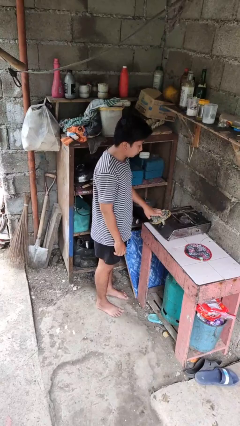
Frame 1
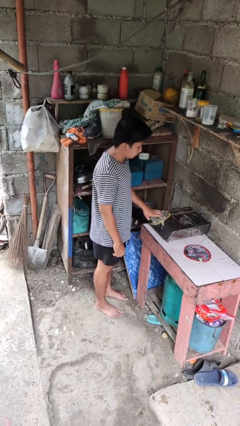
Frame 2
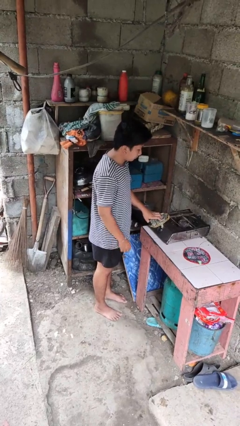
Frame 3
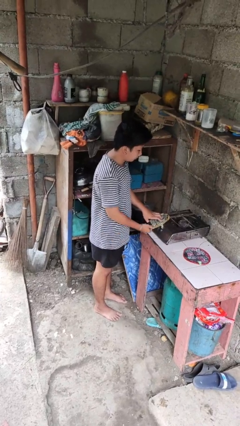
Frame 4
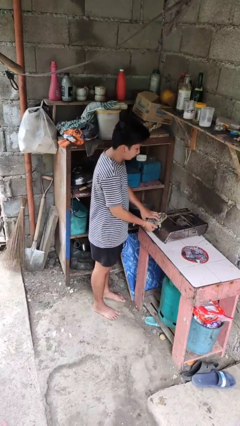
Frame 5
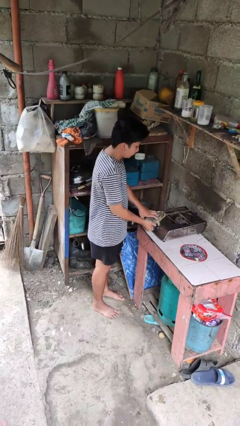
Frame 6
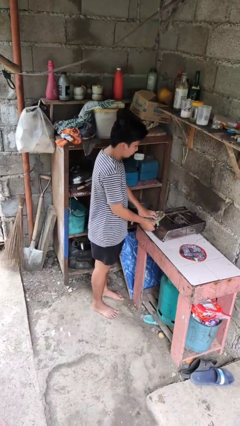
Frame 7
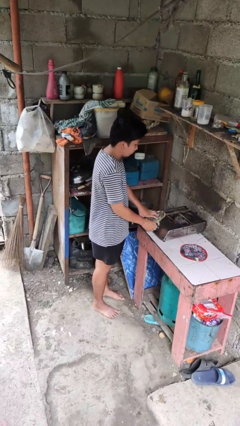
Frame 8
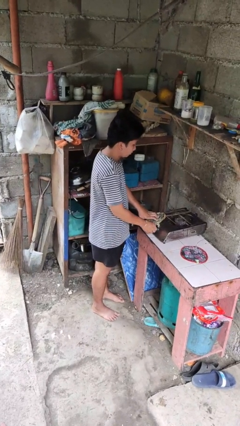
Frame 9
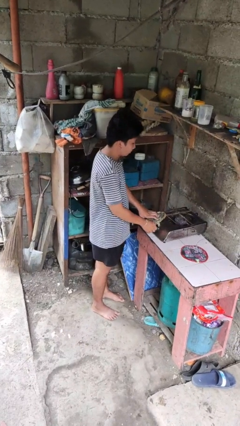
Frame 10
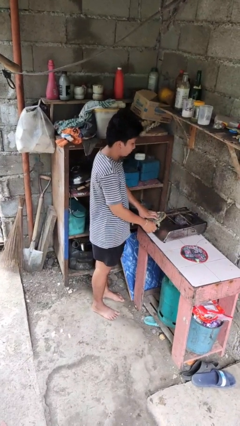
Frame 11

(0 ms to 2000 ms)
person turns on stovetop

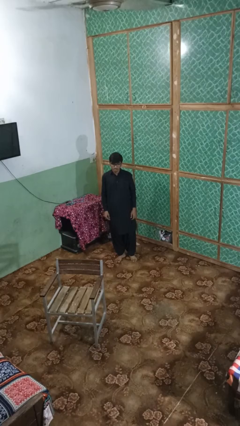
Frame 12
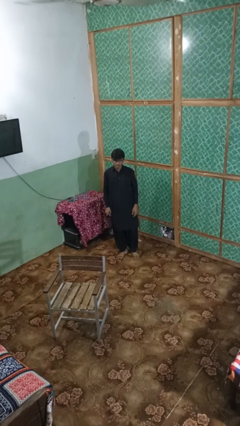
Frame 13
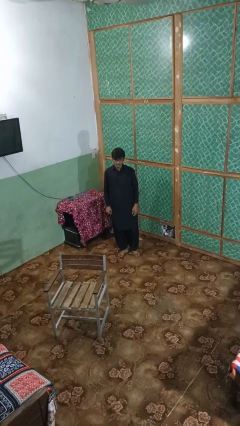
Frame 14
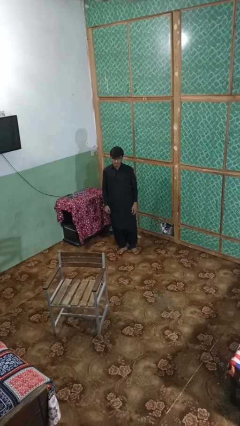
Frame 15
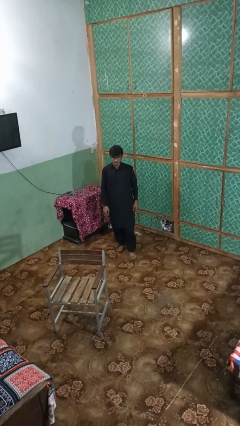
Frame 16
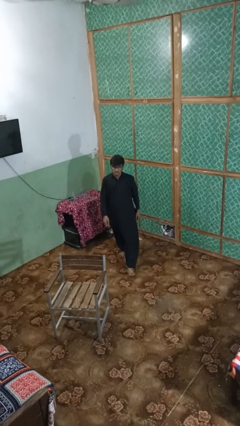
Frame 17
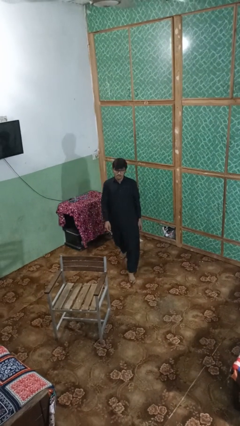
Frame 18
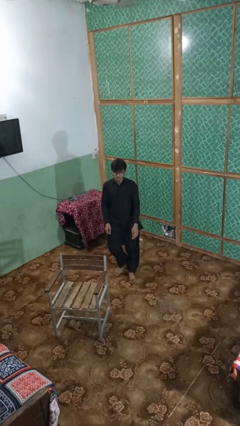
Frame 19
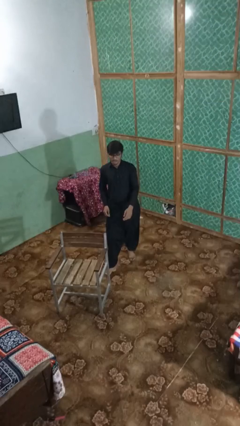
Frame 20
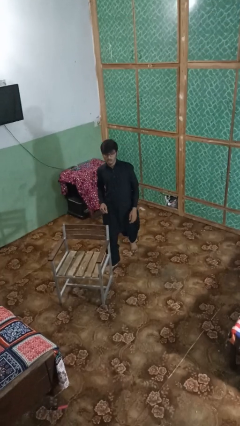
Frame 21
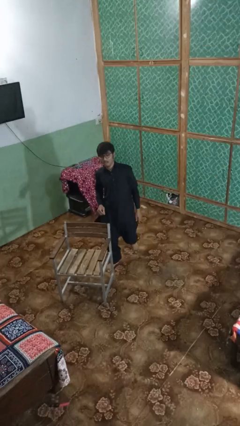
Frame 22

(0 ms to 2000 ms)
person trips on object on floor

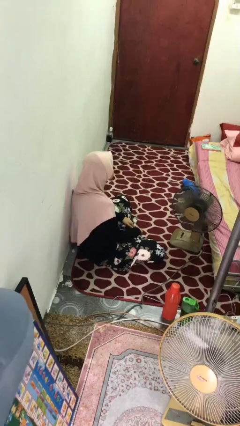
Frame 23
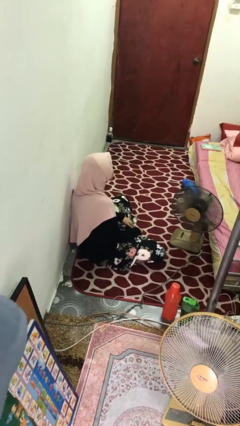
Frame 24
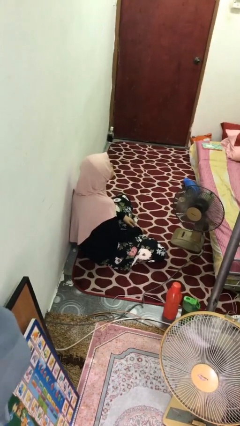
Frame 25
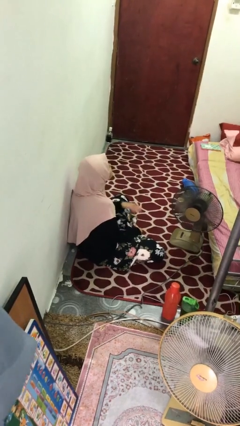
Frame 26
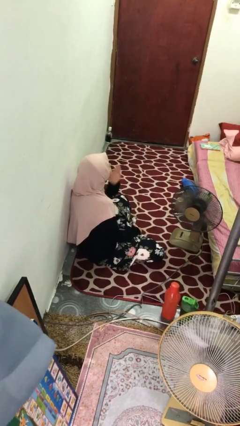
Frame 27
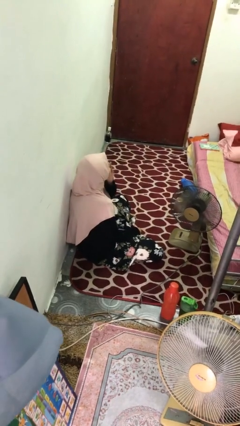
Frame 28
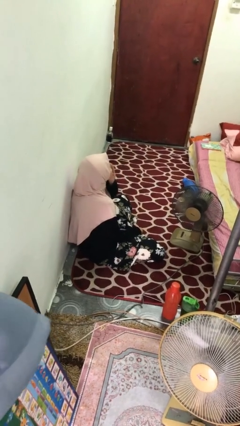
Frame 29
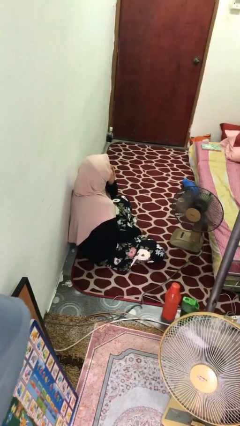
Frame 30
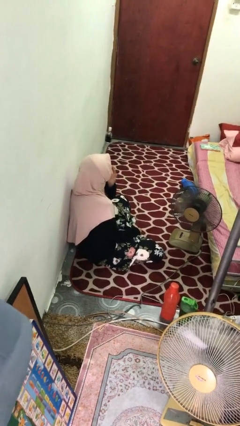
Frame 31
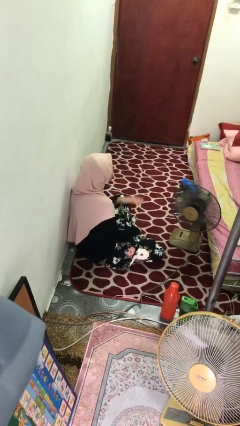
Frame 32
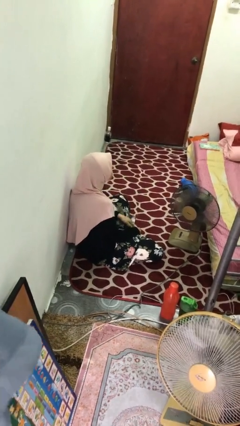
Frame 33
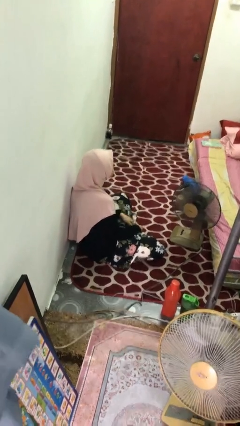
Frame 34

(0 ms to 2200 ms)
person yawns

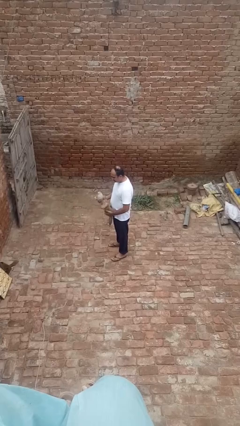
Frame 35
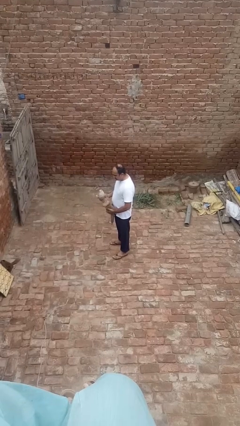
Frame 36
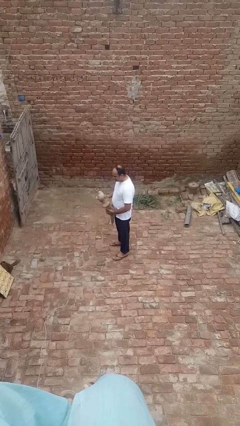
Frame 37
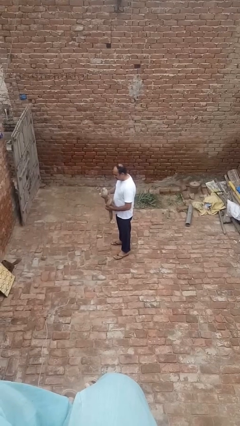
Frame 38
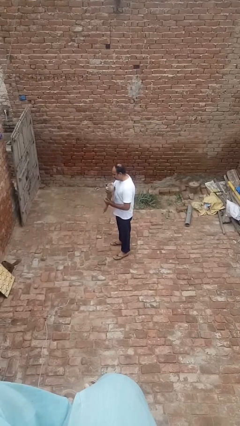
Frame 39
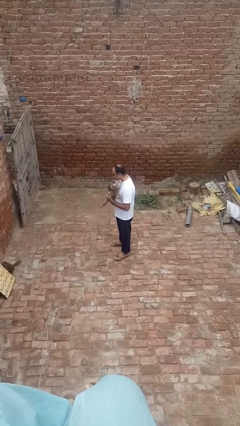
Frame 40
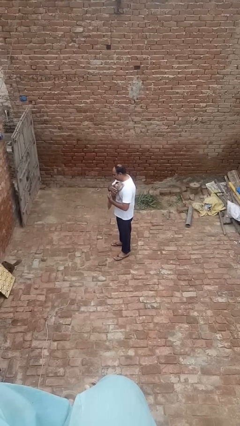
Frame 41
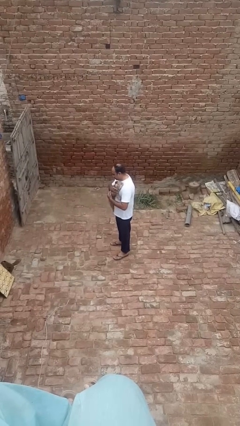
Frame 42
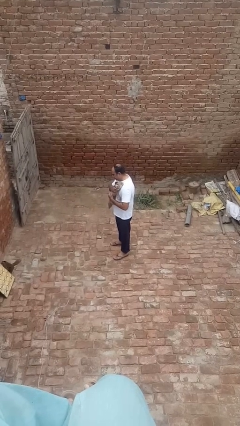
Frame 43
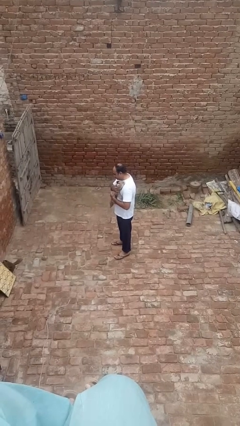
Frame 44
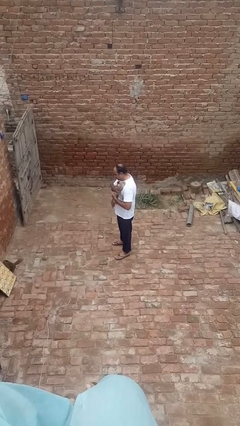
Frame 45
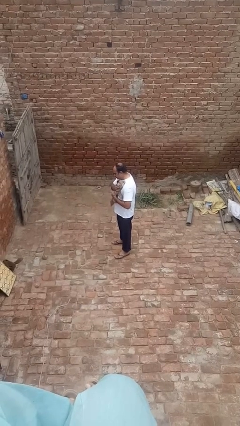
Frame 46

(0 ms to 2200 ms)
person hugs stuffed animal

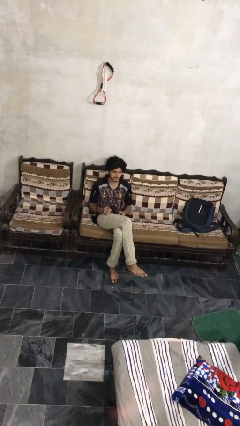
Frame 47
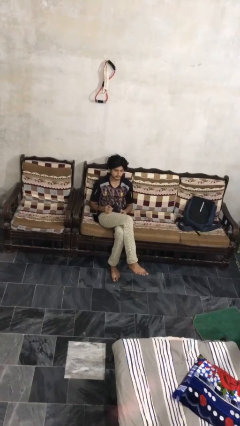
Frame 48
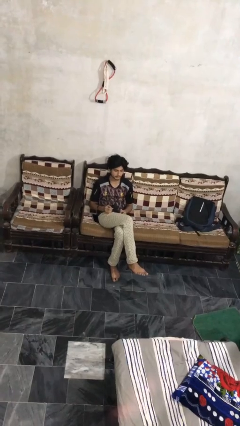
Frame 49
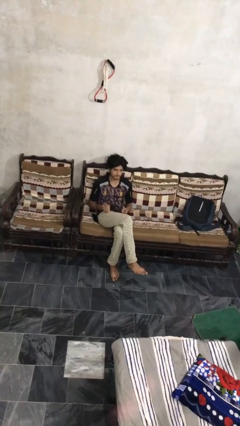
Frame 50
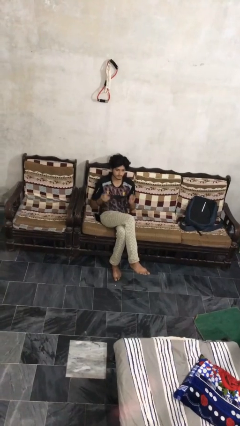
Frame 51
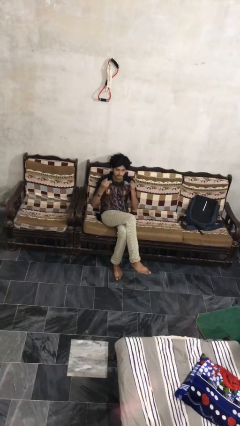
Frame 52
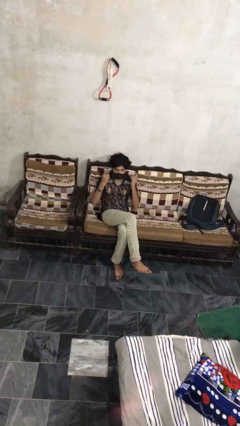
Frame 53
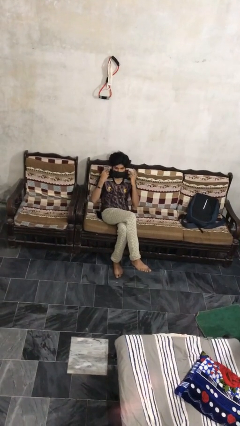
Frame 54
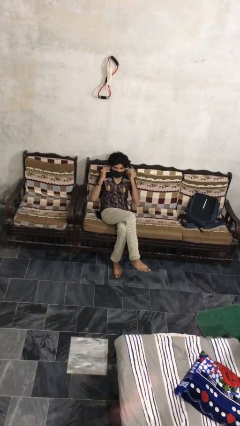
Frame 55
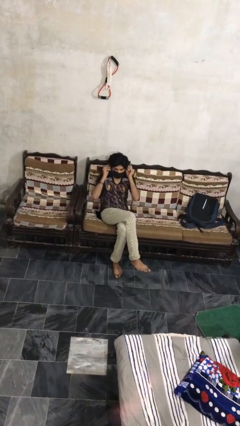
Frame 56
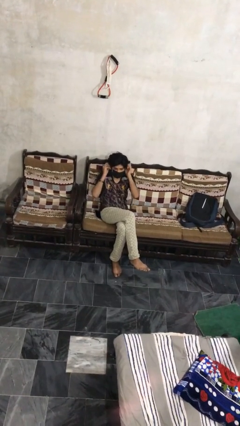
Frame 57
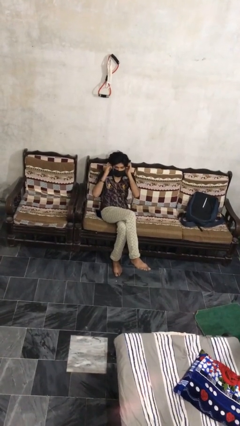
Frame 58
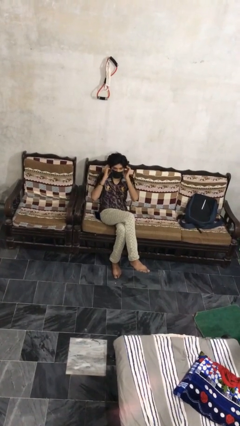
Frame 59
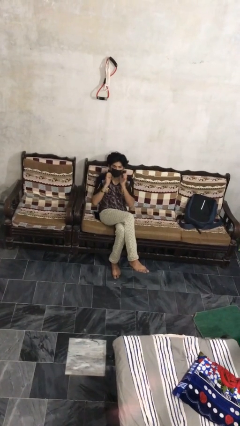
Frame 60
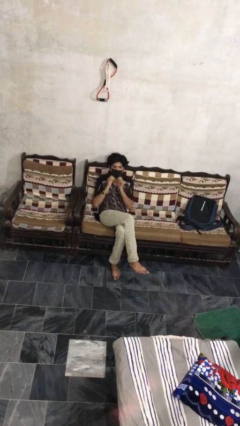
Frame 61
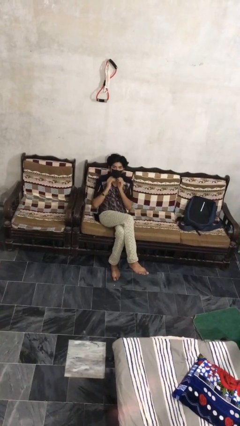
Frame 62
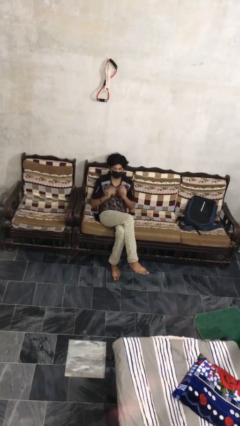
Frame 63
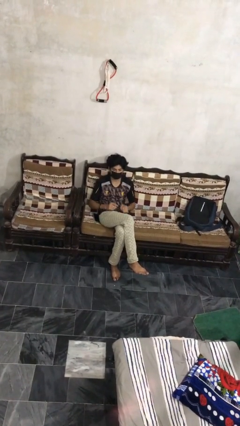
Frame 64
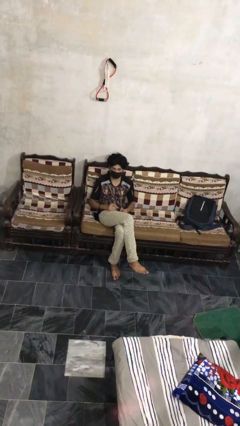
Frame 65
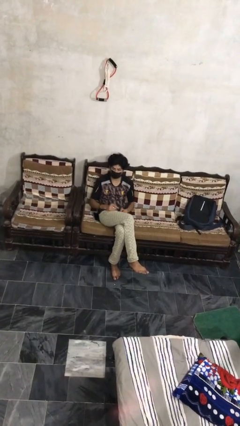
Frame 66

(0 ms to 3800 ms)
person puts on facemask

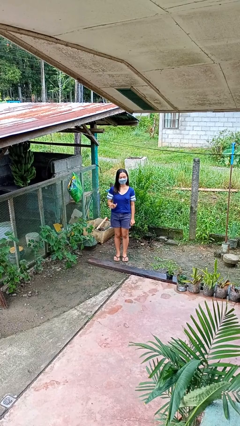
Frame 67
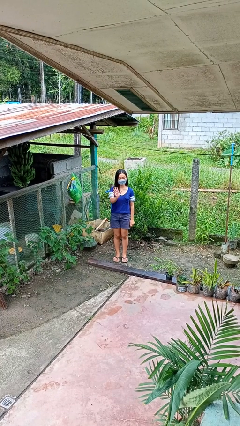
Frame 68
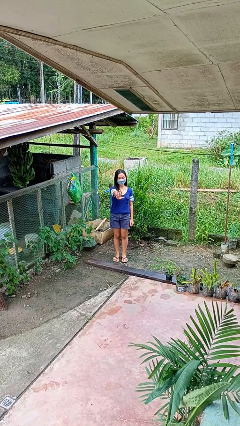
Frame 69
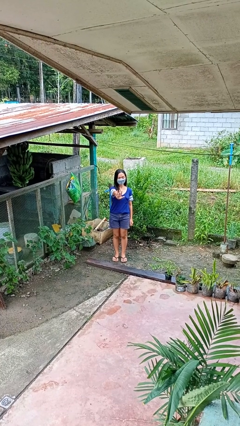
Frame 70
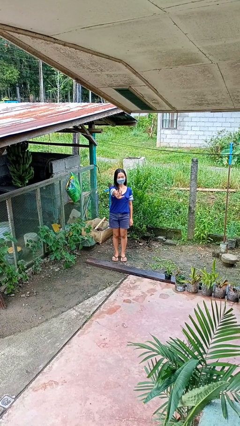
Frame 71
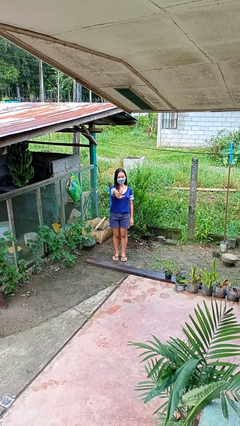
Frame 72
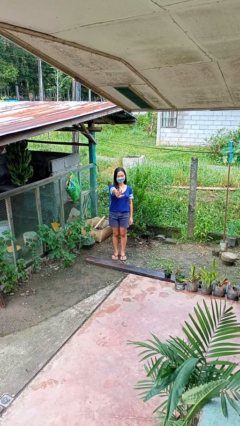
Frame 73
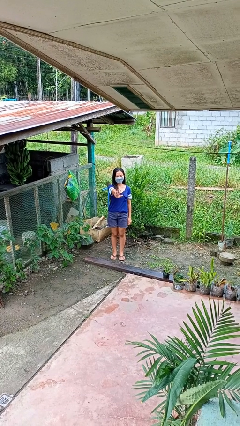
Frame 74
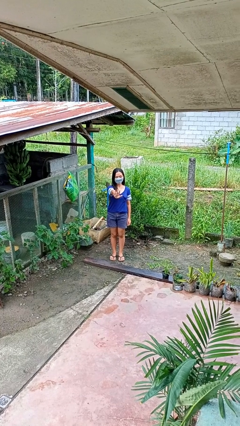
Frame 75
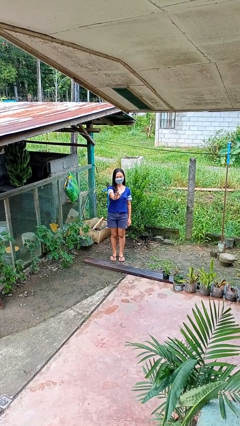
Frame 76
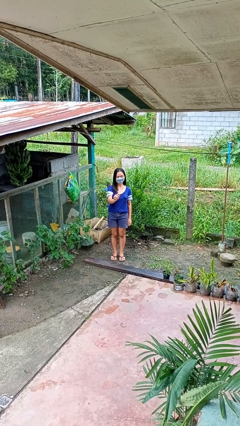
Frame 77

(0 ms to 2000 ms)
person gestures stop

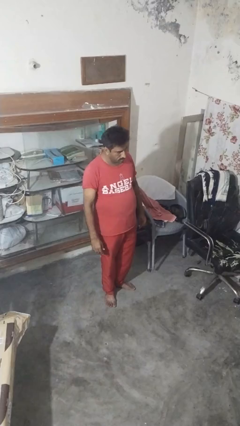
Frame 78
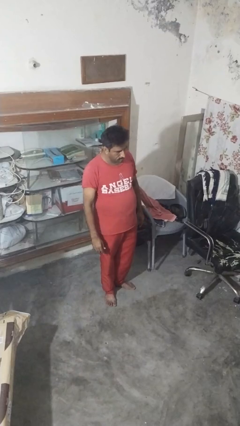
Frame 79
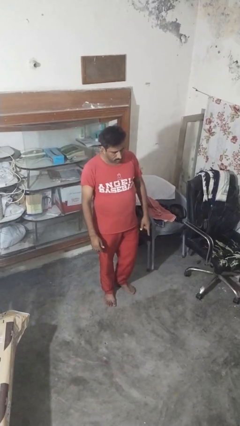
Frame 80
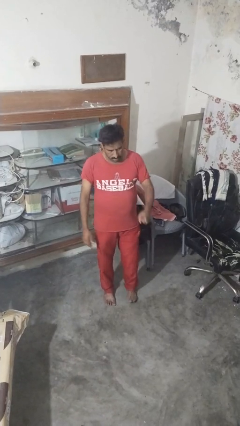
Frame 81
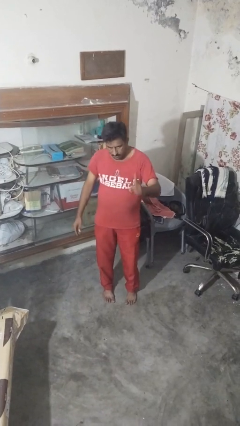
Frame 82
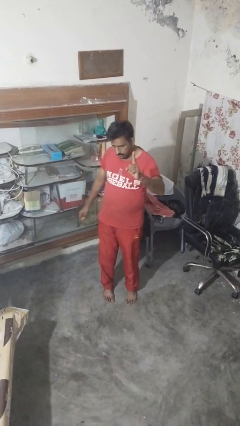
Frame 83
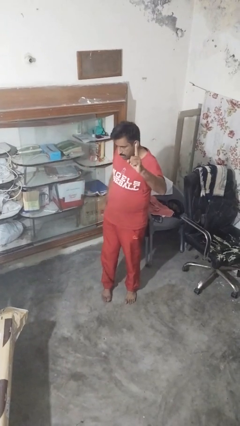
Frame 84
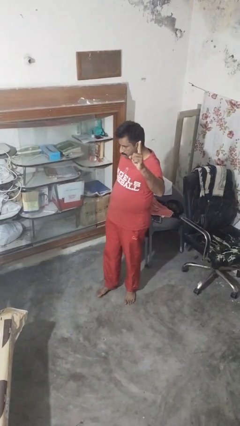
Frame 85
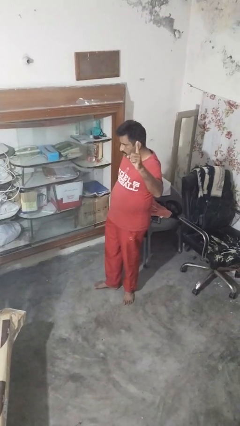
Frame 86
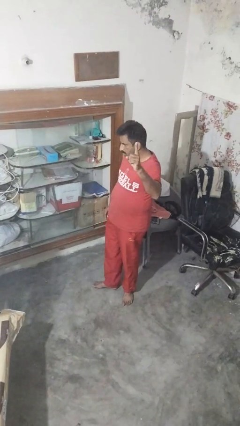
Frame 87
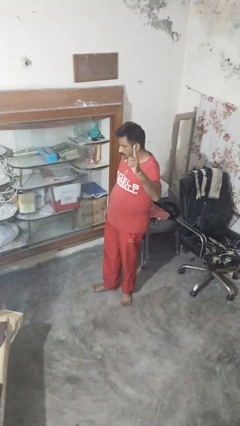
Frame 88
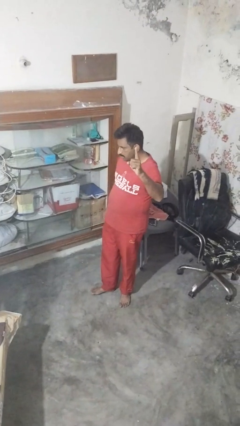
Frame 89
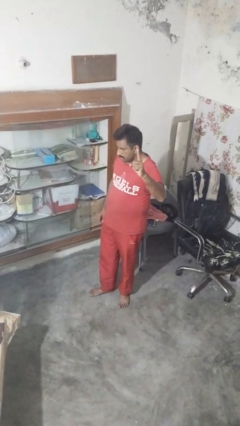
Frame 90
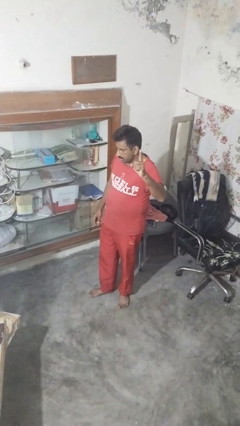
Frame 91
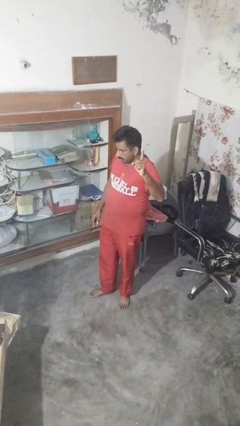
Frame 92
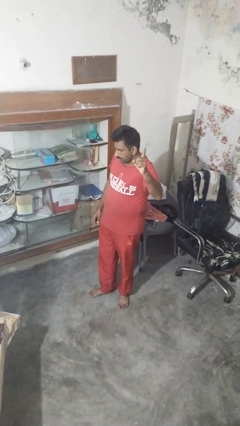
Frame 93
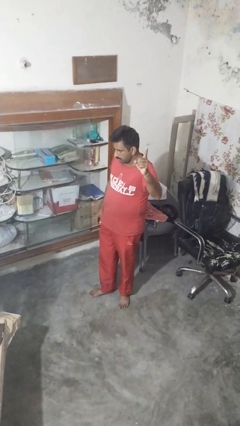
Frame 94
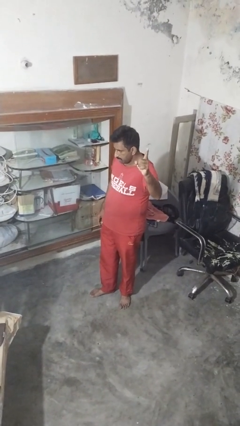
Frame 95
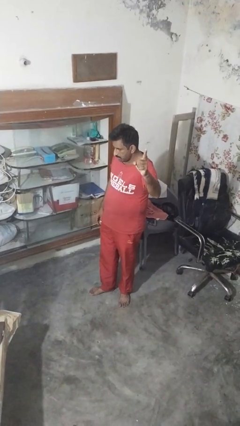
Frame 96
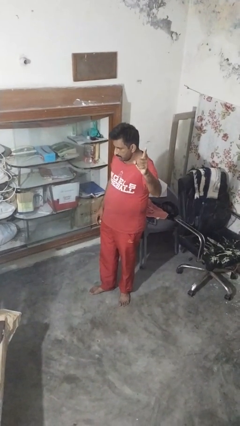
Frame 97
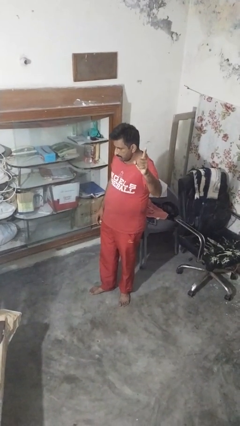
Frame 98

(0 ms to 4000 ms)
person gestures number one
